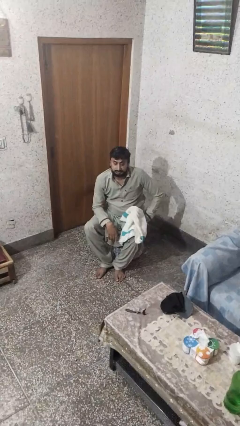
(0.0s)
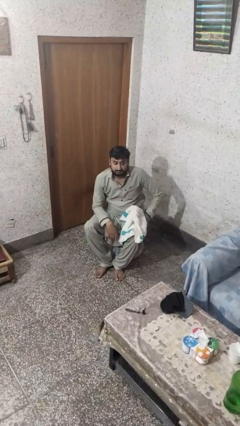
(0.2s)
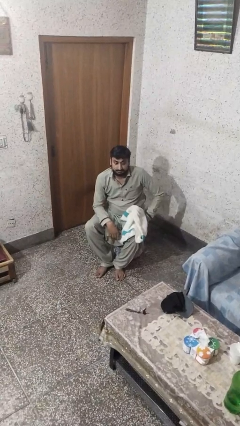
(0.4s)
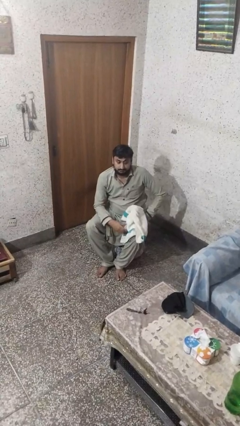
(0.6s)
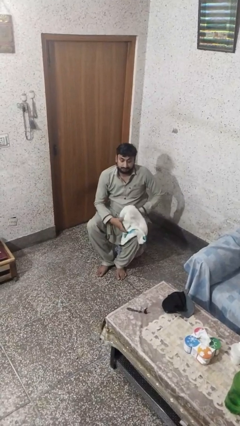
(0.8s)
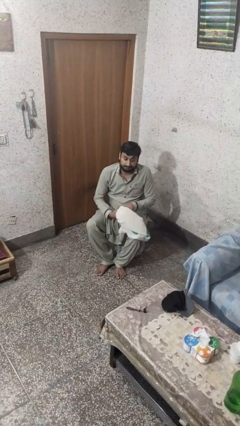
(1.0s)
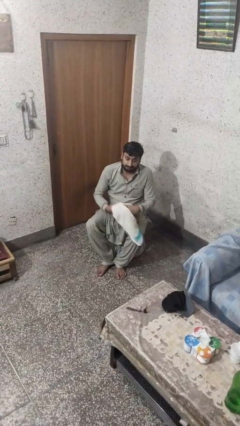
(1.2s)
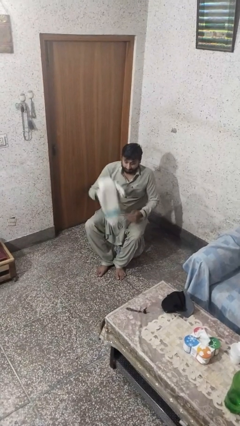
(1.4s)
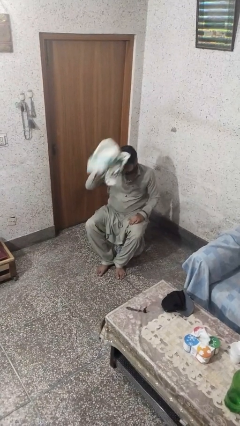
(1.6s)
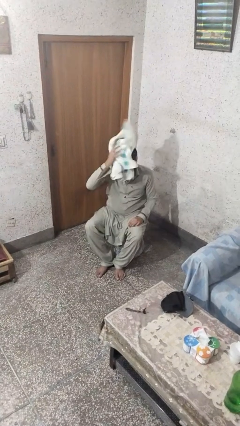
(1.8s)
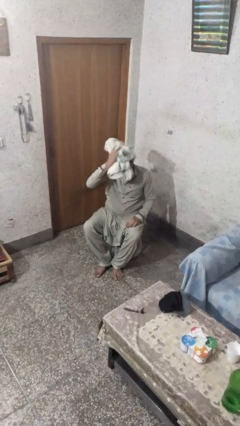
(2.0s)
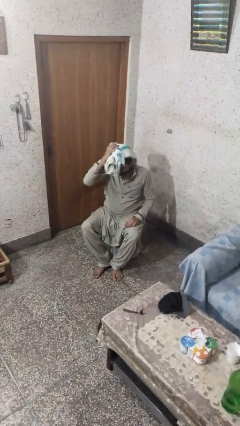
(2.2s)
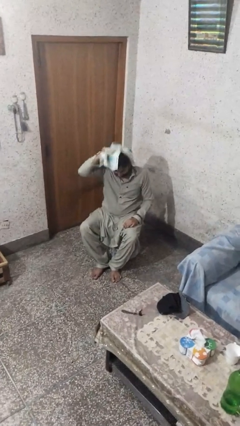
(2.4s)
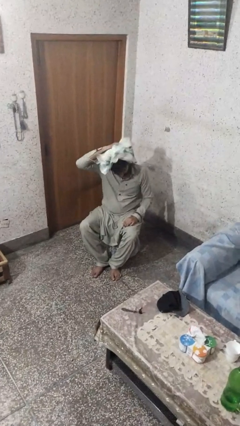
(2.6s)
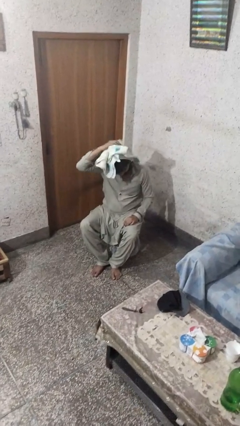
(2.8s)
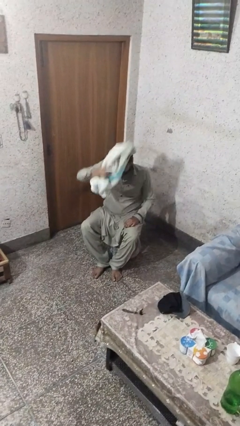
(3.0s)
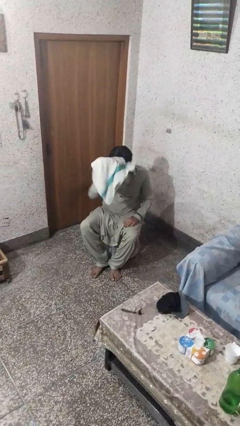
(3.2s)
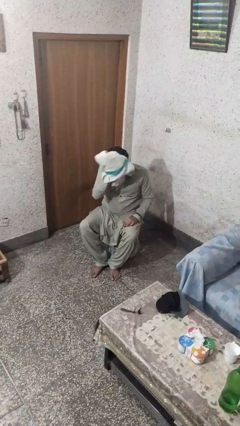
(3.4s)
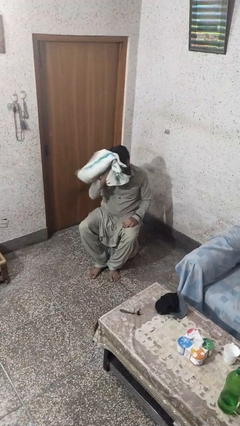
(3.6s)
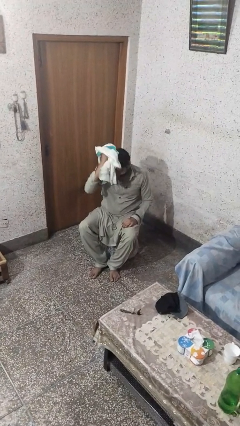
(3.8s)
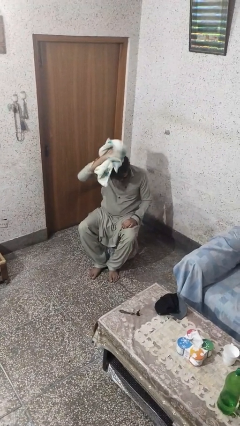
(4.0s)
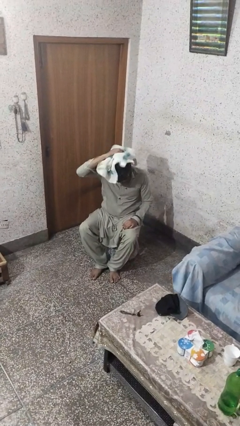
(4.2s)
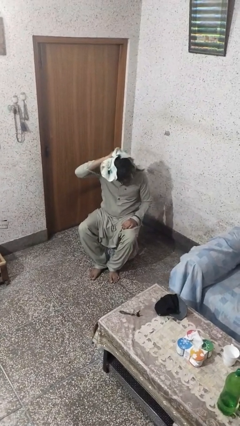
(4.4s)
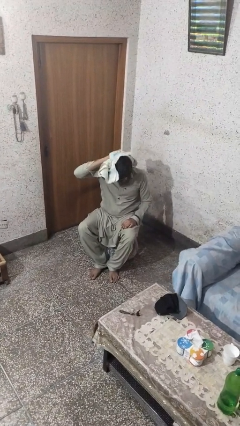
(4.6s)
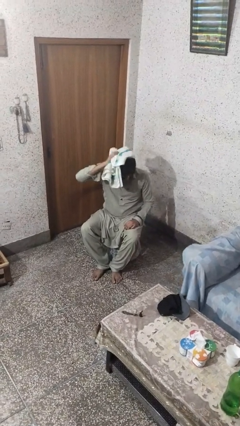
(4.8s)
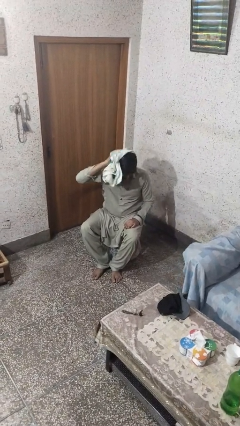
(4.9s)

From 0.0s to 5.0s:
person dries hair with towel

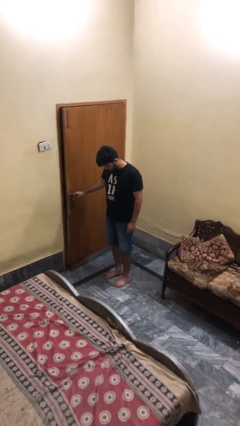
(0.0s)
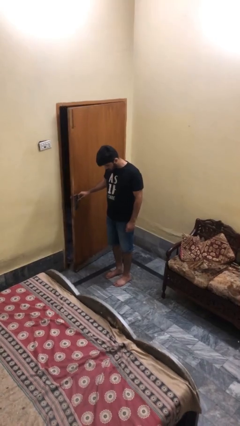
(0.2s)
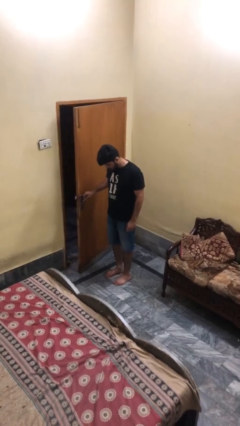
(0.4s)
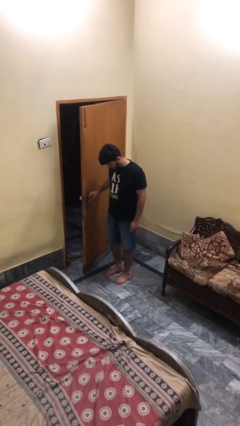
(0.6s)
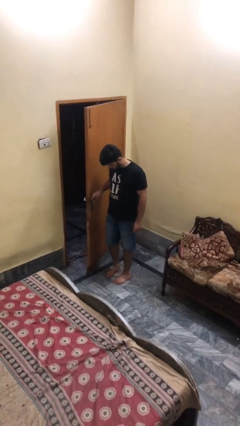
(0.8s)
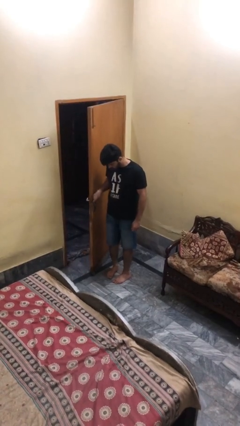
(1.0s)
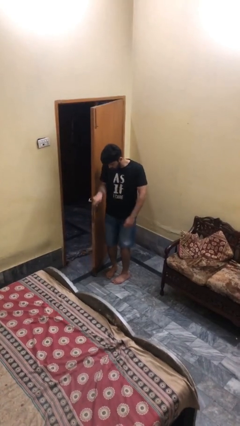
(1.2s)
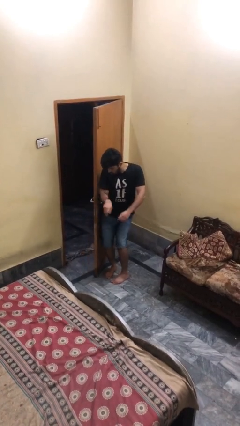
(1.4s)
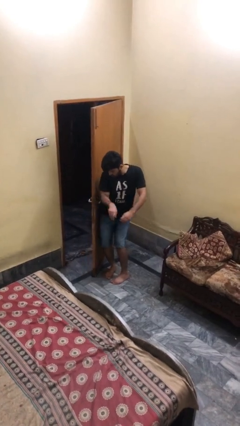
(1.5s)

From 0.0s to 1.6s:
person opens facility door

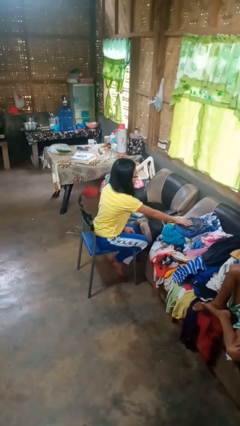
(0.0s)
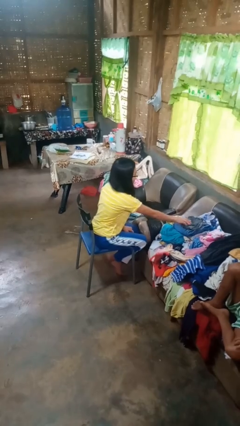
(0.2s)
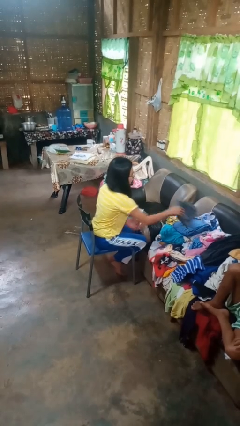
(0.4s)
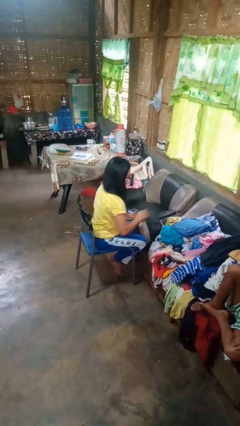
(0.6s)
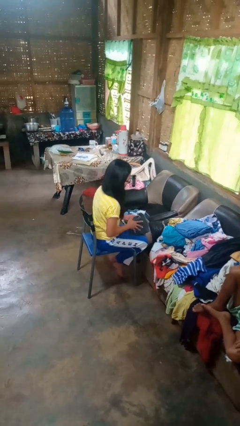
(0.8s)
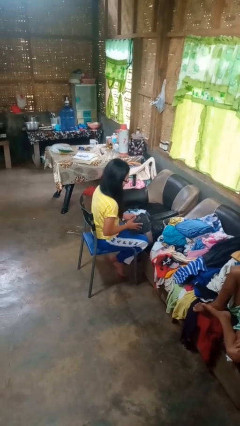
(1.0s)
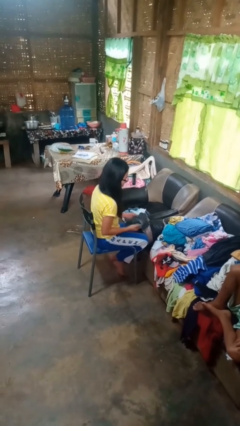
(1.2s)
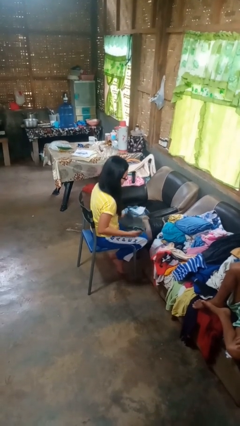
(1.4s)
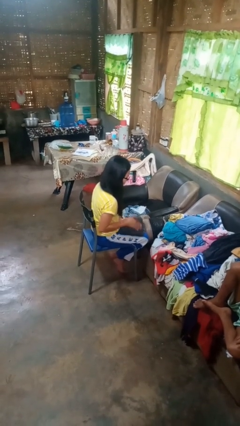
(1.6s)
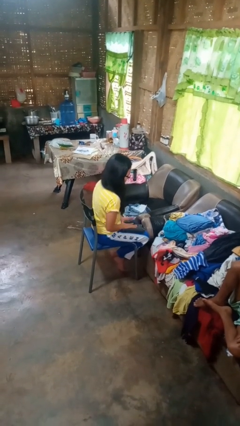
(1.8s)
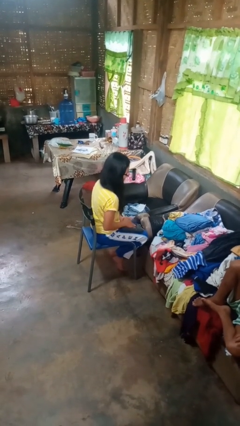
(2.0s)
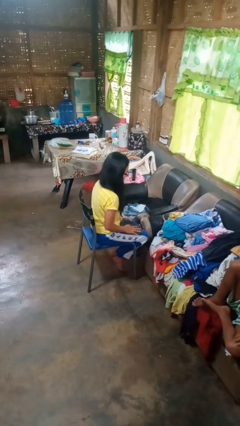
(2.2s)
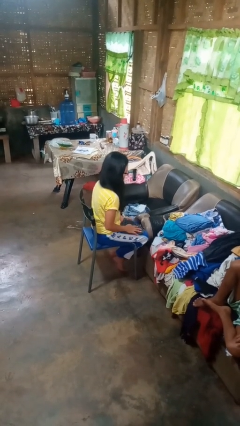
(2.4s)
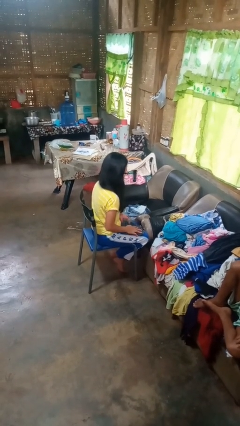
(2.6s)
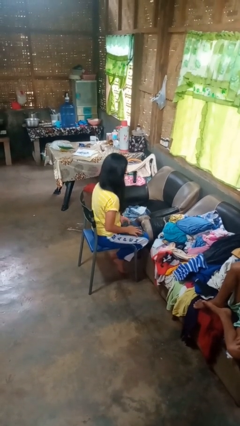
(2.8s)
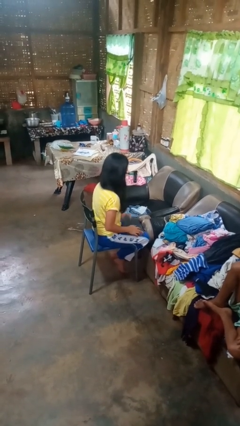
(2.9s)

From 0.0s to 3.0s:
person folds pants

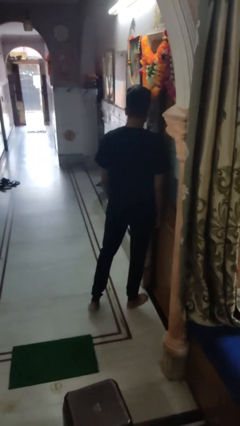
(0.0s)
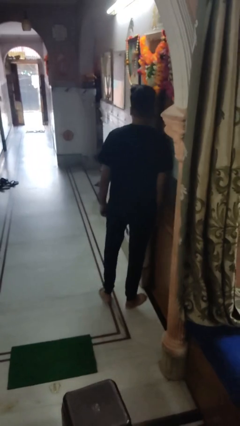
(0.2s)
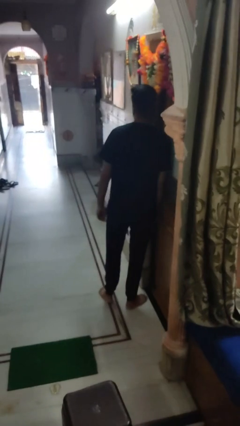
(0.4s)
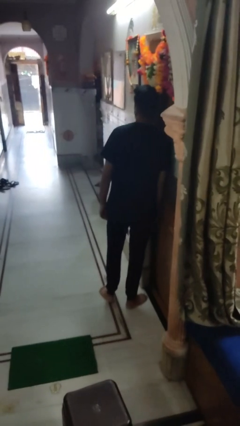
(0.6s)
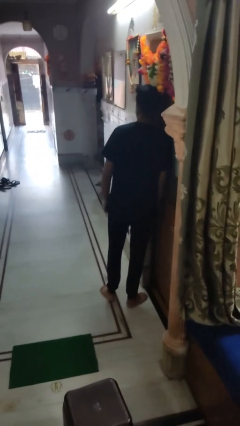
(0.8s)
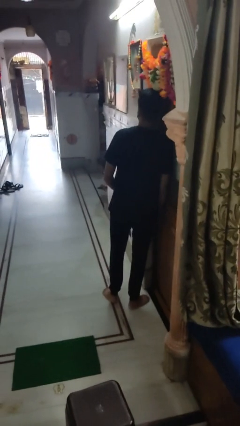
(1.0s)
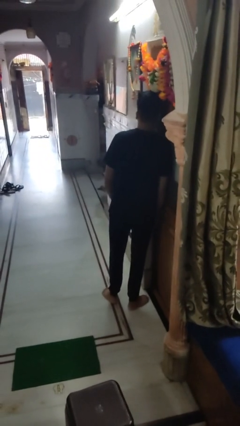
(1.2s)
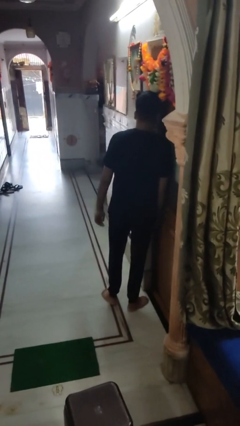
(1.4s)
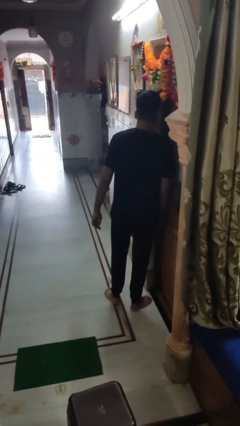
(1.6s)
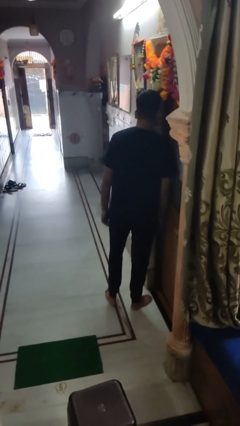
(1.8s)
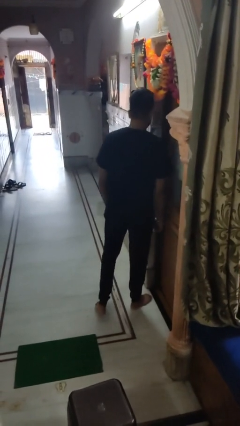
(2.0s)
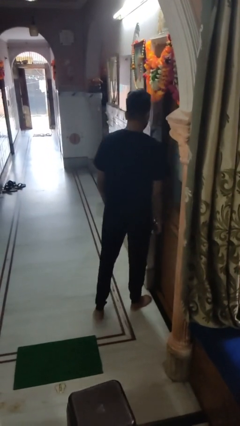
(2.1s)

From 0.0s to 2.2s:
person bumps into wall

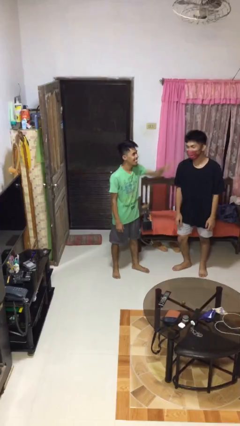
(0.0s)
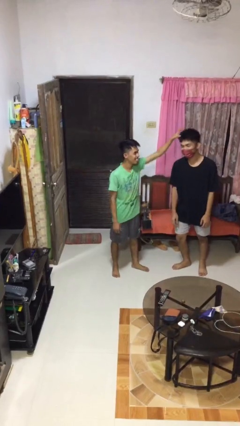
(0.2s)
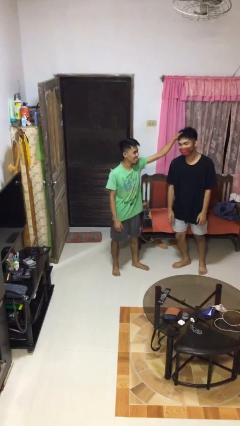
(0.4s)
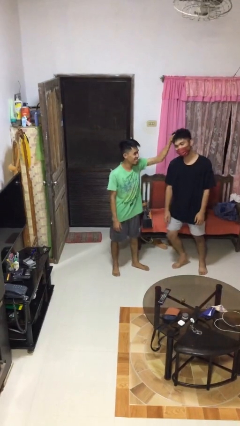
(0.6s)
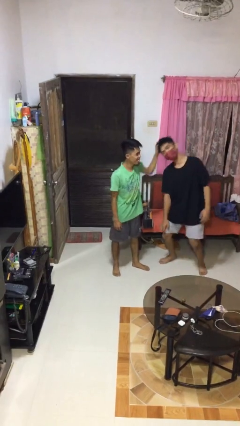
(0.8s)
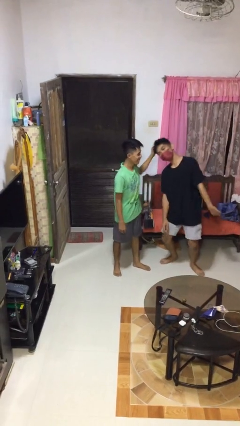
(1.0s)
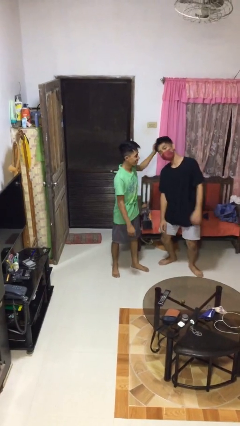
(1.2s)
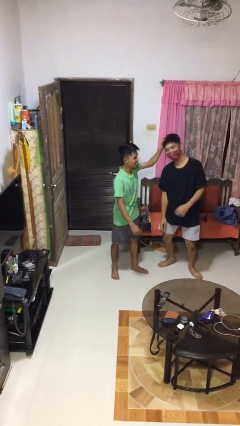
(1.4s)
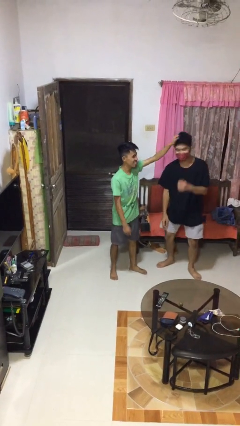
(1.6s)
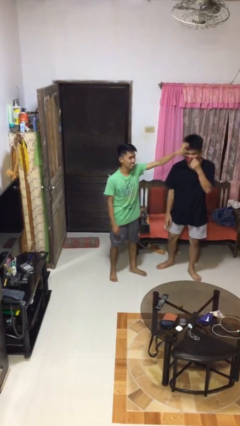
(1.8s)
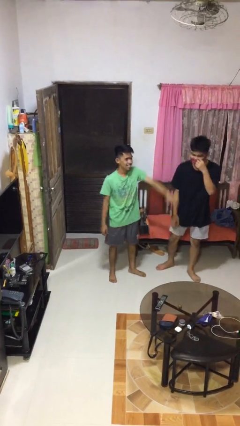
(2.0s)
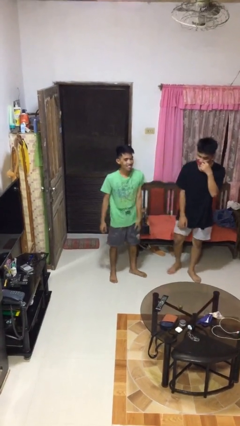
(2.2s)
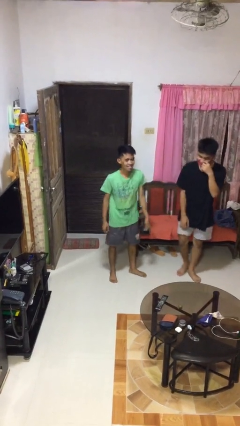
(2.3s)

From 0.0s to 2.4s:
person grabs person by hair

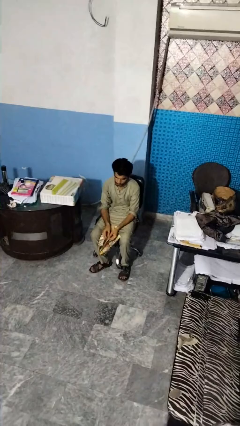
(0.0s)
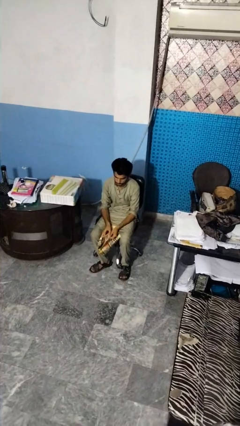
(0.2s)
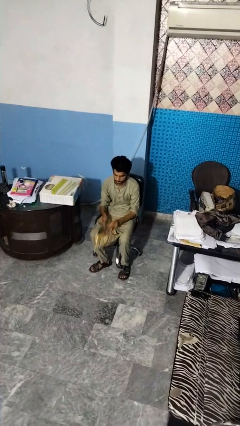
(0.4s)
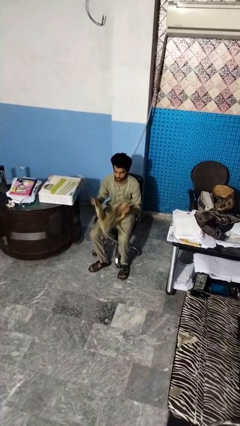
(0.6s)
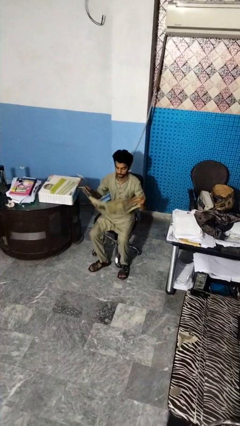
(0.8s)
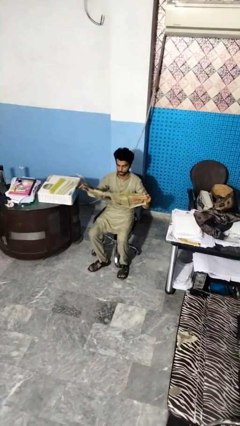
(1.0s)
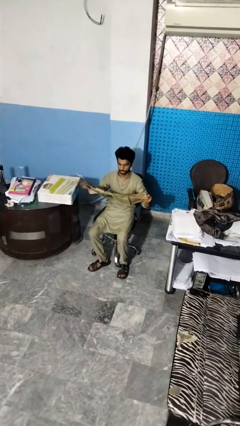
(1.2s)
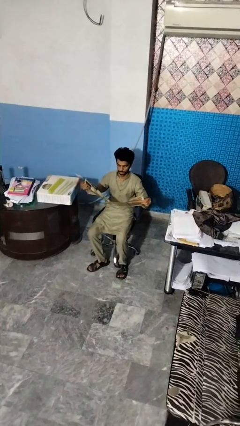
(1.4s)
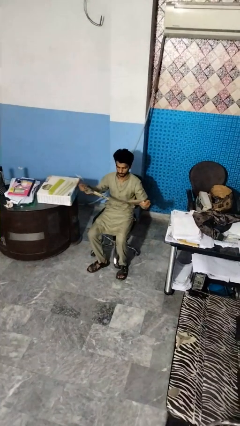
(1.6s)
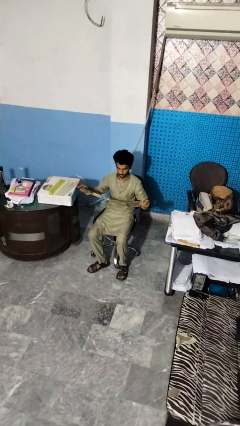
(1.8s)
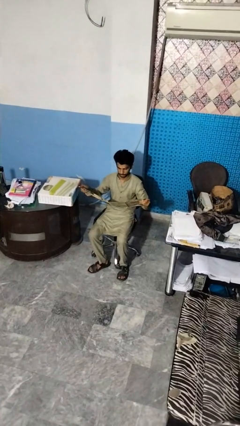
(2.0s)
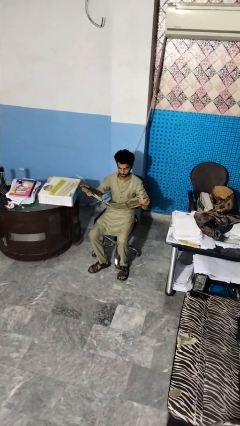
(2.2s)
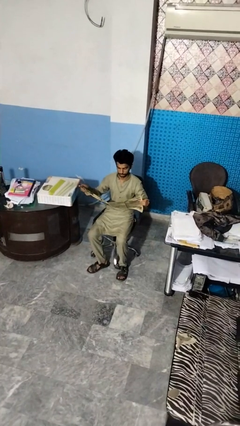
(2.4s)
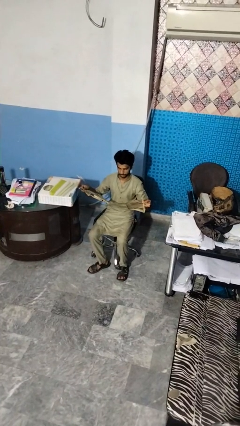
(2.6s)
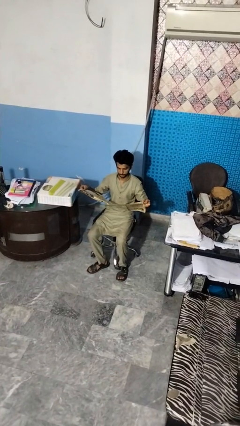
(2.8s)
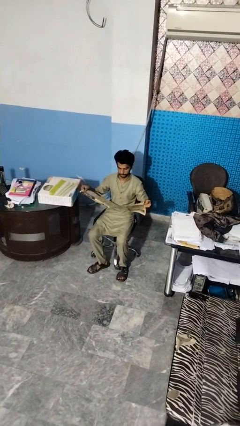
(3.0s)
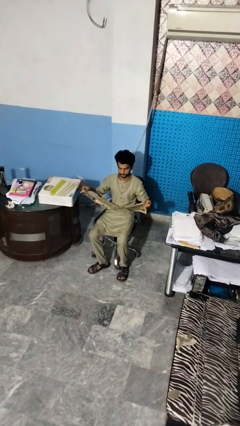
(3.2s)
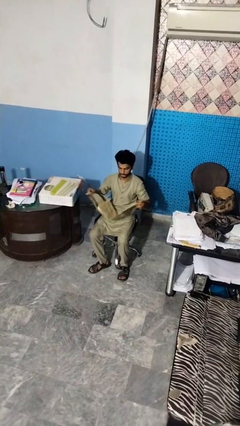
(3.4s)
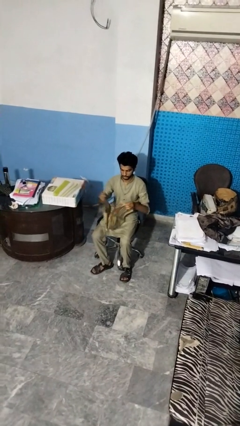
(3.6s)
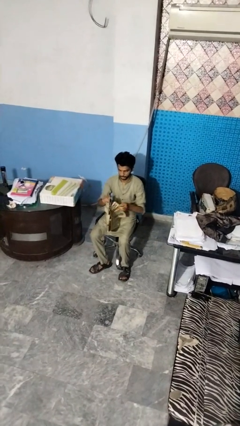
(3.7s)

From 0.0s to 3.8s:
person reads newspaper
